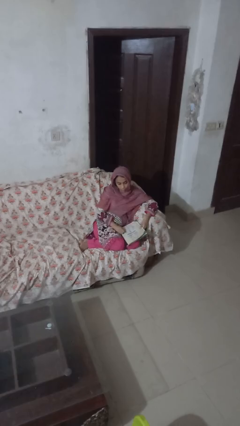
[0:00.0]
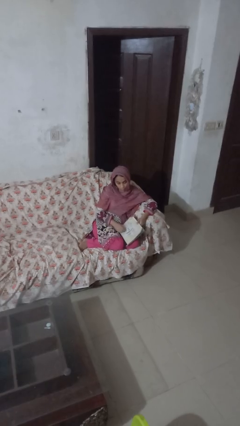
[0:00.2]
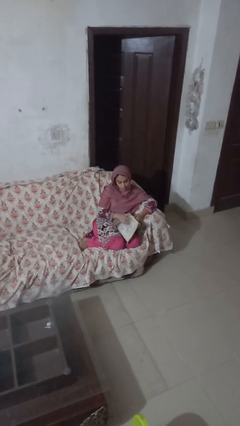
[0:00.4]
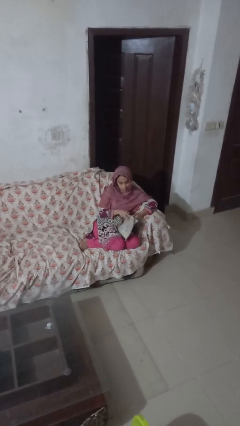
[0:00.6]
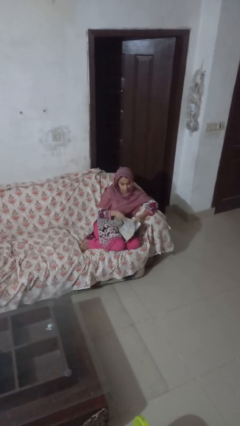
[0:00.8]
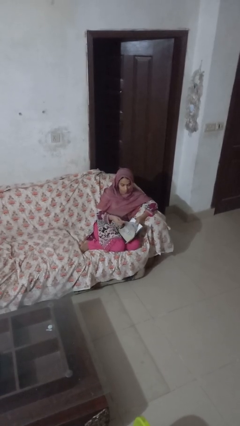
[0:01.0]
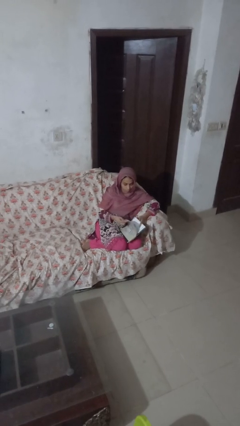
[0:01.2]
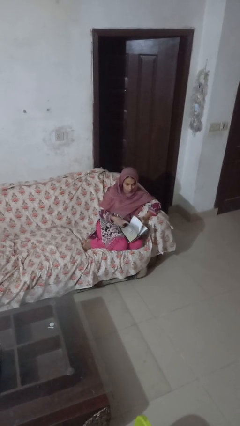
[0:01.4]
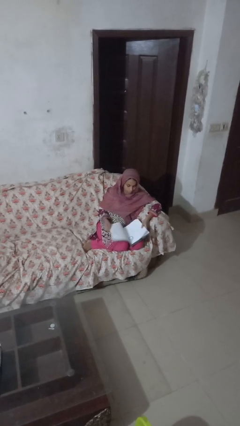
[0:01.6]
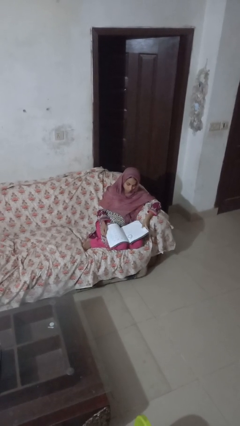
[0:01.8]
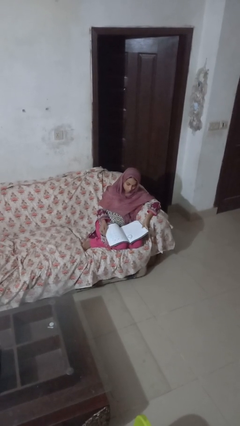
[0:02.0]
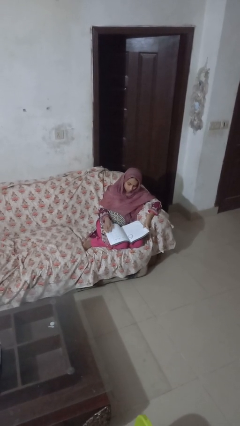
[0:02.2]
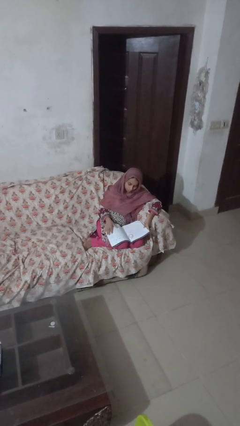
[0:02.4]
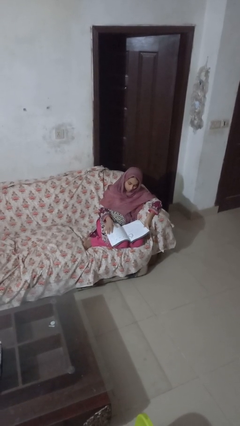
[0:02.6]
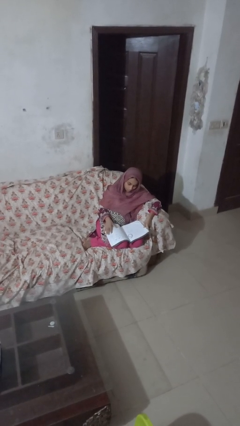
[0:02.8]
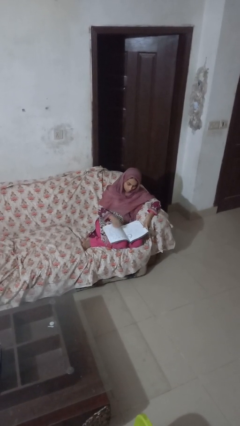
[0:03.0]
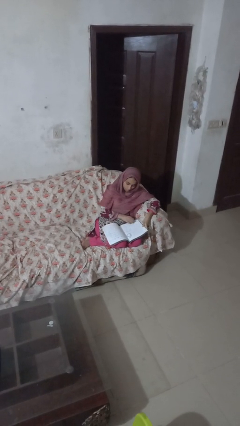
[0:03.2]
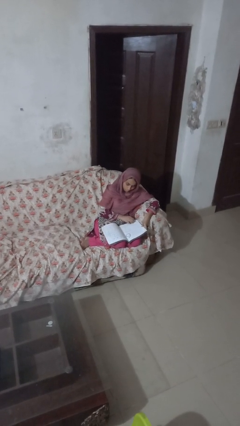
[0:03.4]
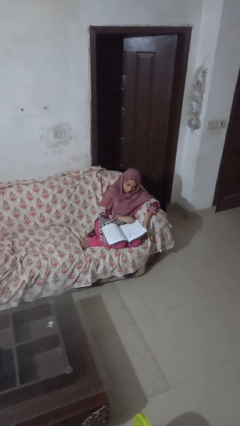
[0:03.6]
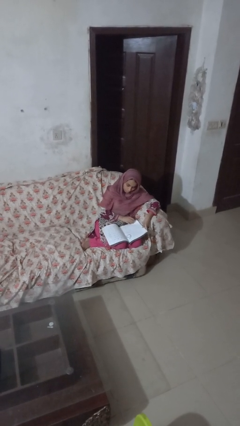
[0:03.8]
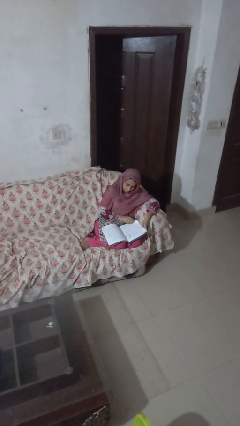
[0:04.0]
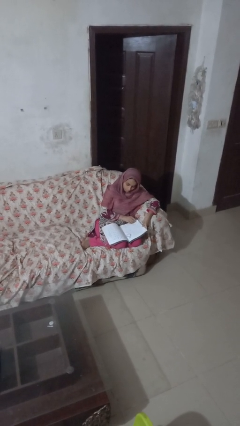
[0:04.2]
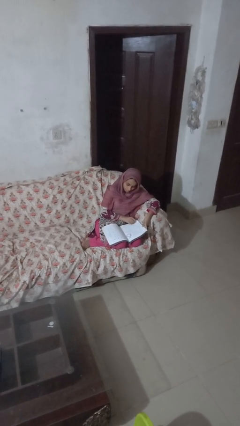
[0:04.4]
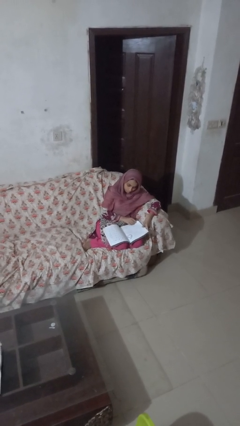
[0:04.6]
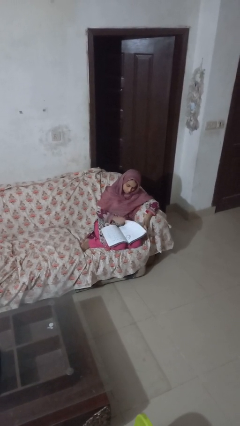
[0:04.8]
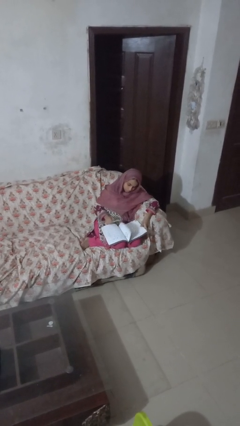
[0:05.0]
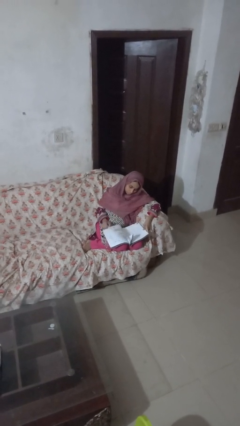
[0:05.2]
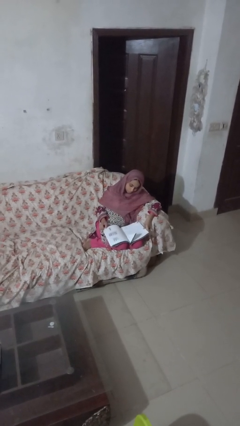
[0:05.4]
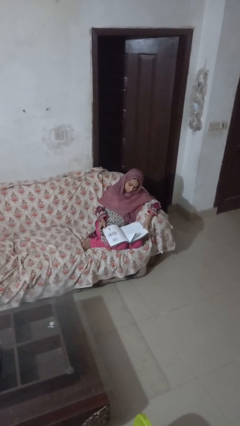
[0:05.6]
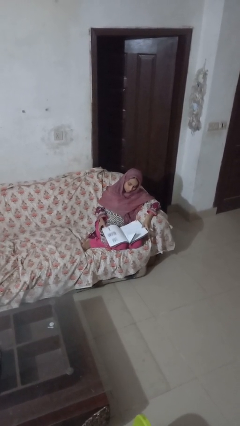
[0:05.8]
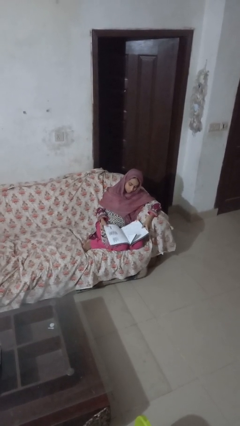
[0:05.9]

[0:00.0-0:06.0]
person reads book

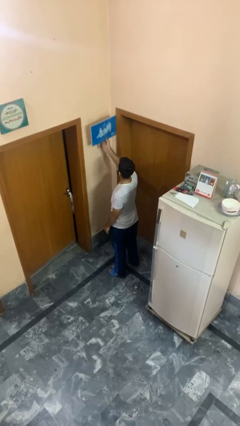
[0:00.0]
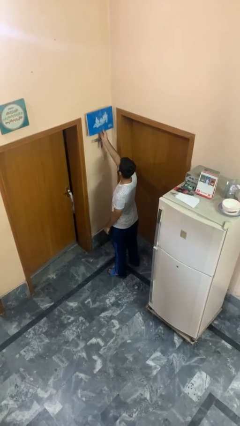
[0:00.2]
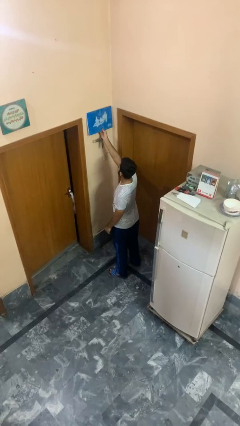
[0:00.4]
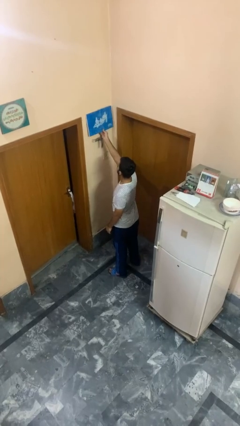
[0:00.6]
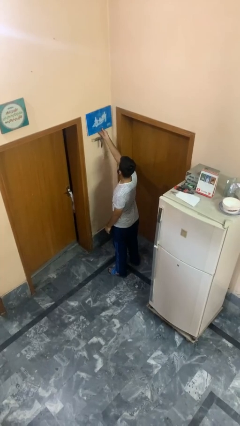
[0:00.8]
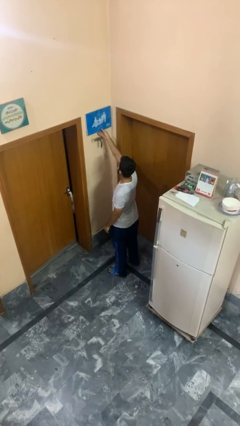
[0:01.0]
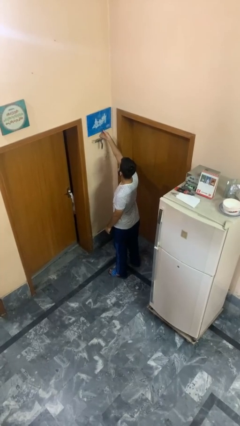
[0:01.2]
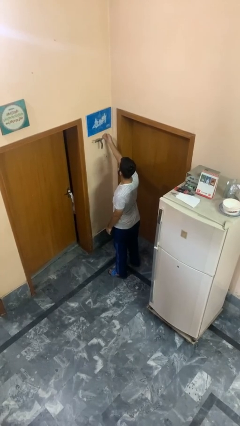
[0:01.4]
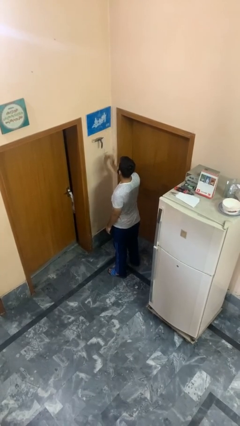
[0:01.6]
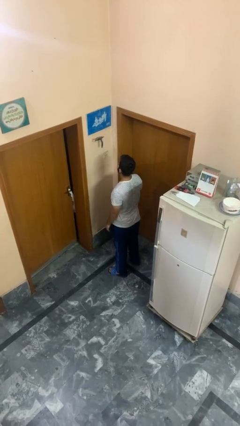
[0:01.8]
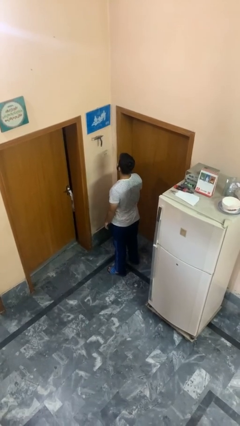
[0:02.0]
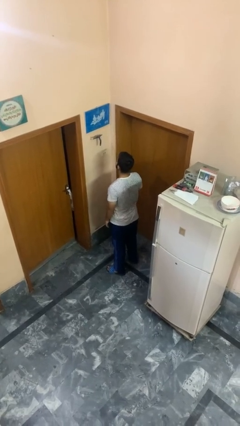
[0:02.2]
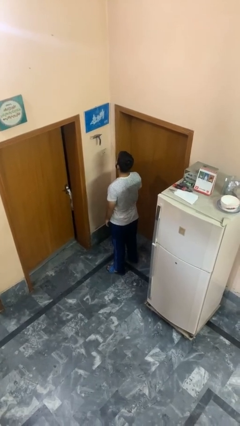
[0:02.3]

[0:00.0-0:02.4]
person puts up picture frame

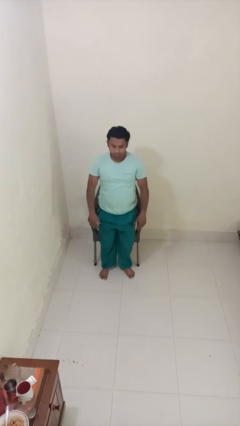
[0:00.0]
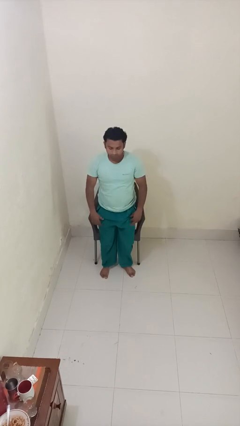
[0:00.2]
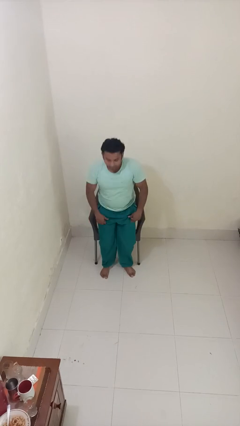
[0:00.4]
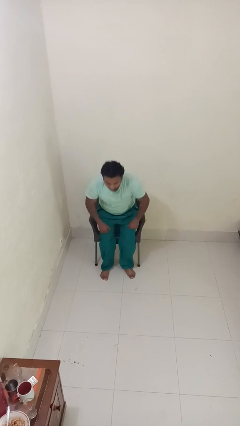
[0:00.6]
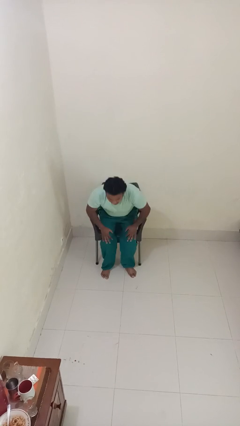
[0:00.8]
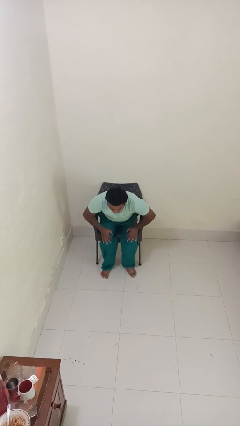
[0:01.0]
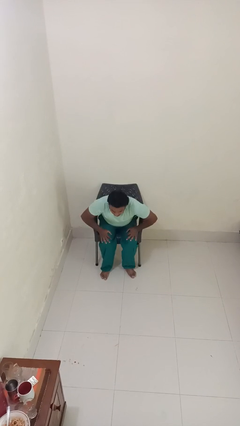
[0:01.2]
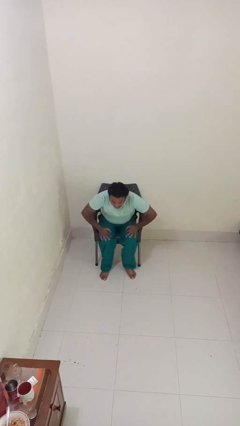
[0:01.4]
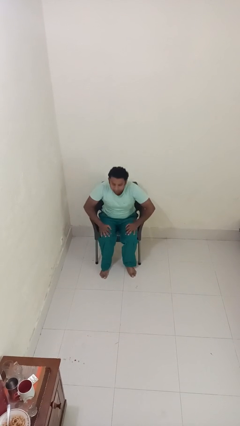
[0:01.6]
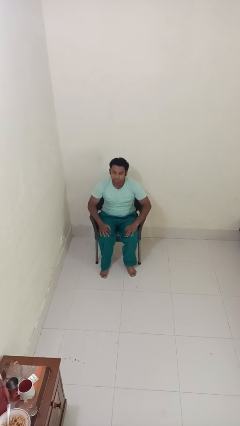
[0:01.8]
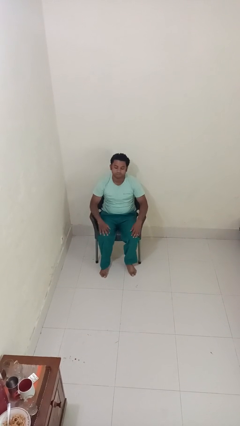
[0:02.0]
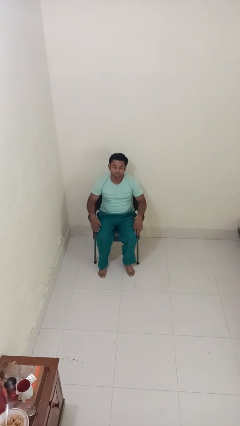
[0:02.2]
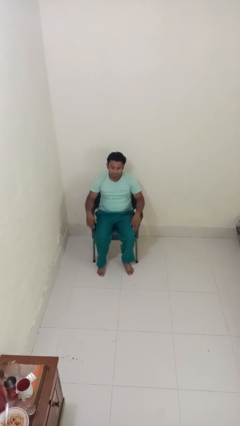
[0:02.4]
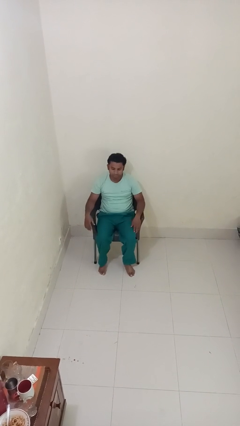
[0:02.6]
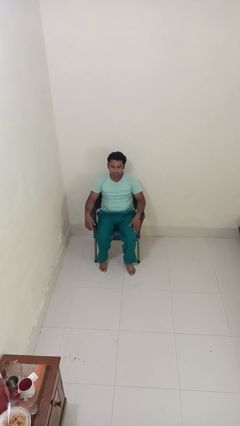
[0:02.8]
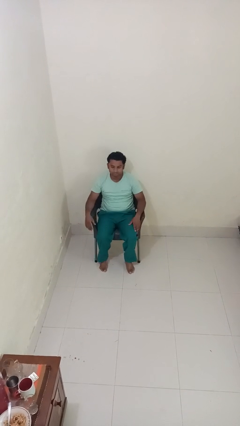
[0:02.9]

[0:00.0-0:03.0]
person sits down

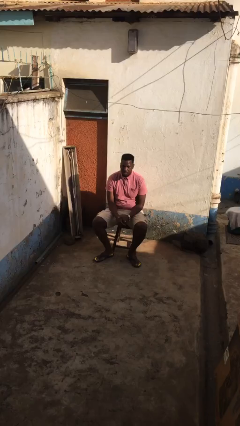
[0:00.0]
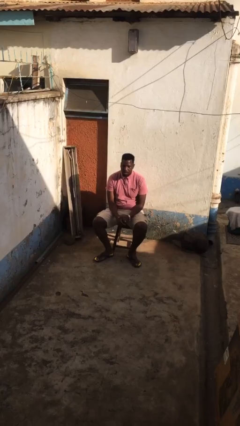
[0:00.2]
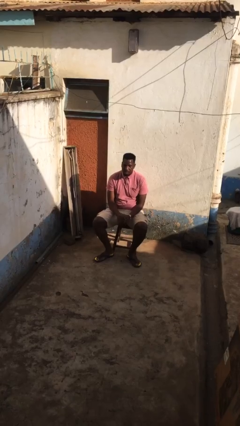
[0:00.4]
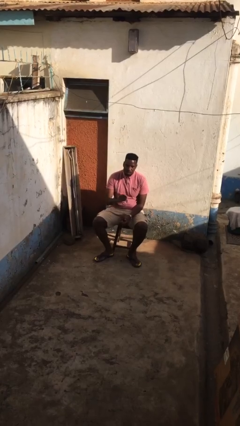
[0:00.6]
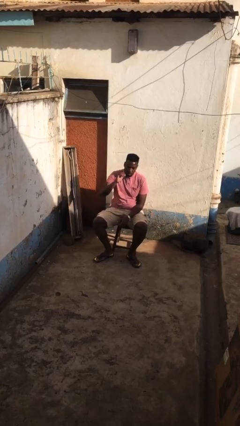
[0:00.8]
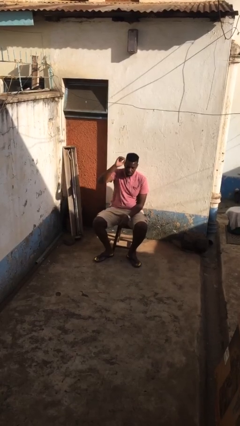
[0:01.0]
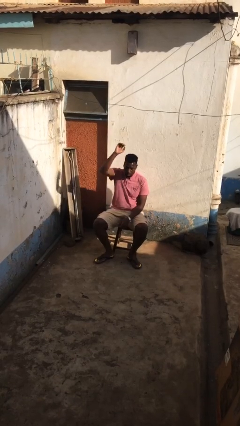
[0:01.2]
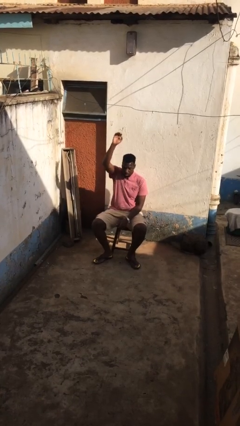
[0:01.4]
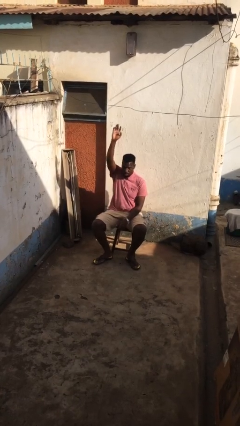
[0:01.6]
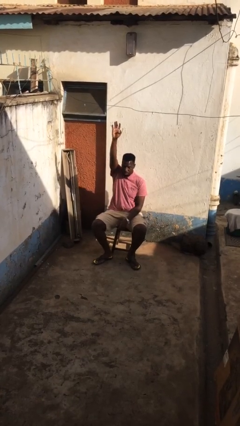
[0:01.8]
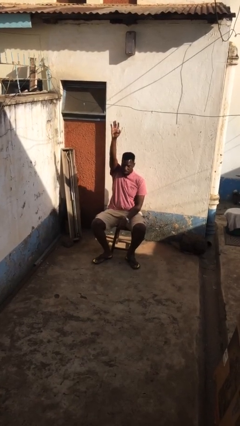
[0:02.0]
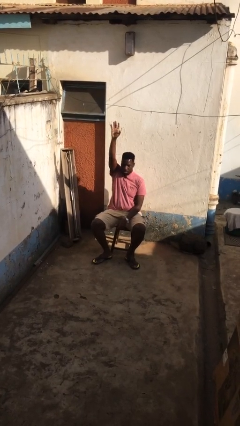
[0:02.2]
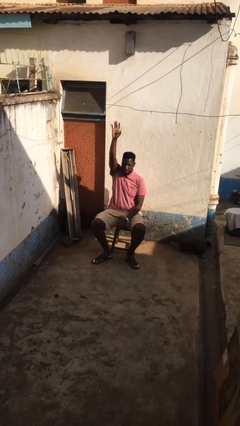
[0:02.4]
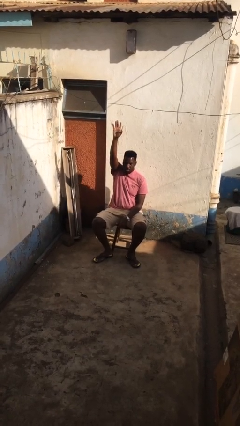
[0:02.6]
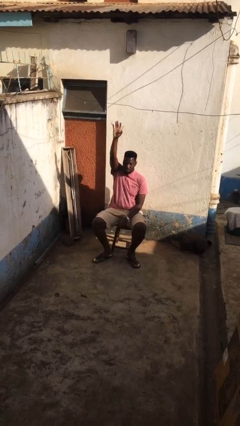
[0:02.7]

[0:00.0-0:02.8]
person gestures raise hand

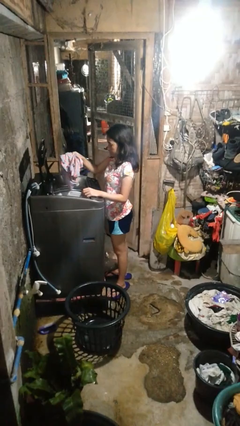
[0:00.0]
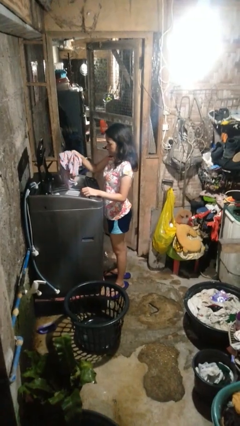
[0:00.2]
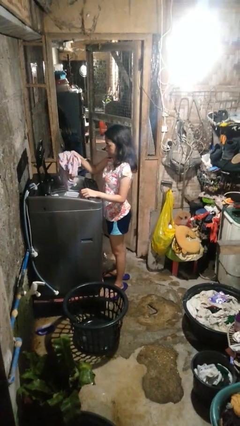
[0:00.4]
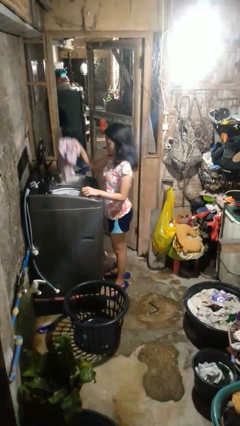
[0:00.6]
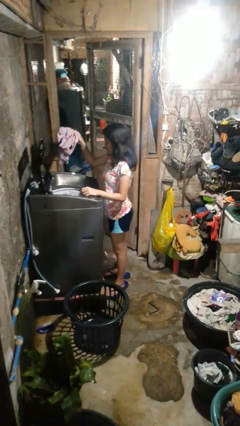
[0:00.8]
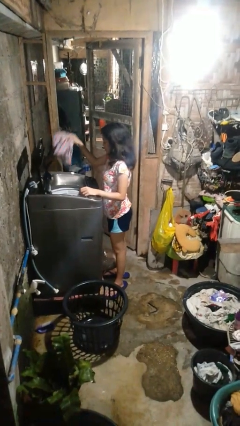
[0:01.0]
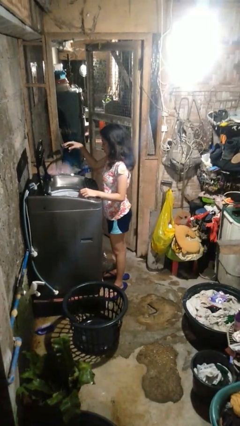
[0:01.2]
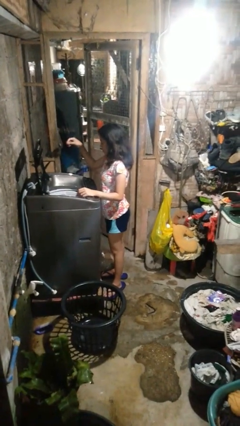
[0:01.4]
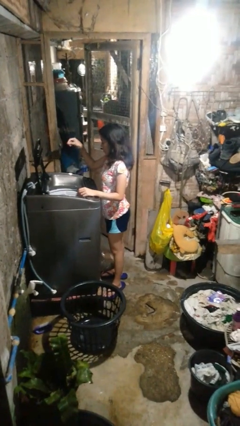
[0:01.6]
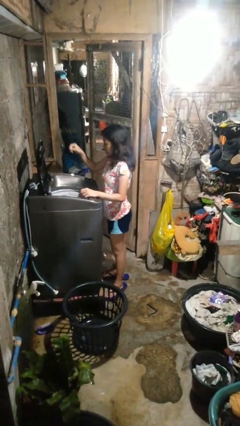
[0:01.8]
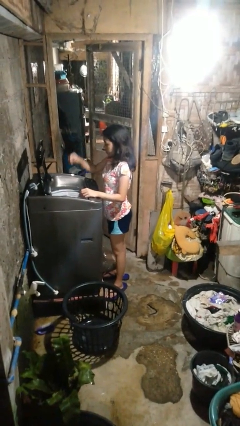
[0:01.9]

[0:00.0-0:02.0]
person loads dryer

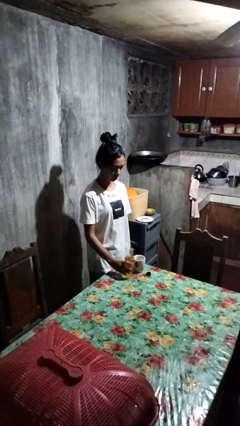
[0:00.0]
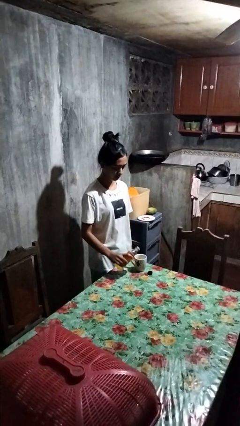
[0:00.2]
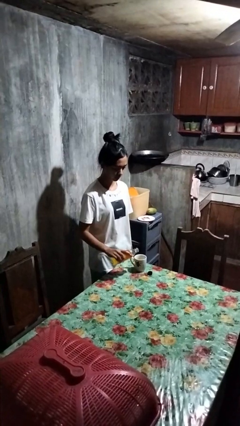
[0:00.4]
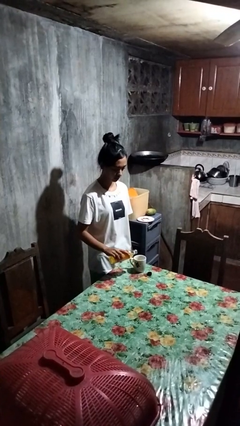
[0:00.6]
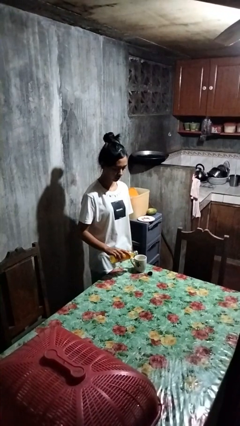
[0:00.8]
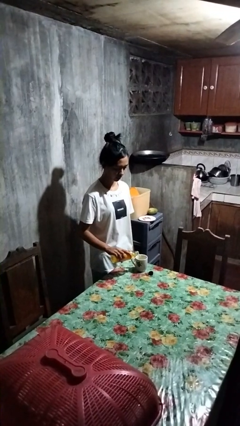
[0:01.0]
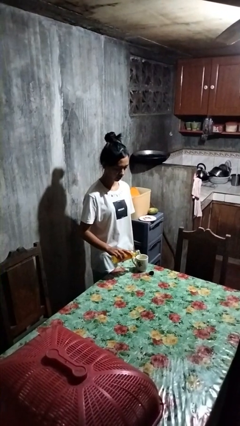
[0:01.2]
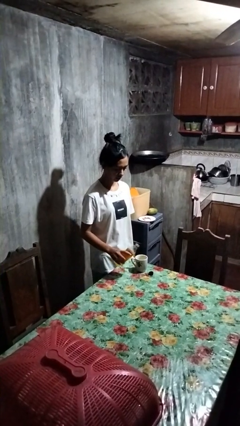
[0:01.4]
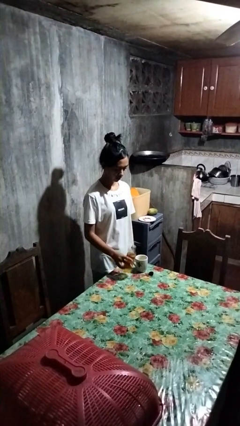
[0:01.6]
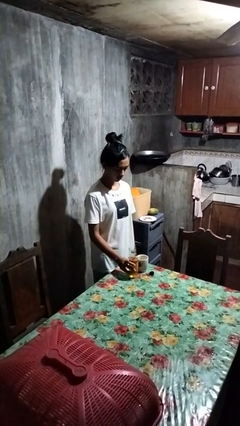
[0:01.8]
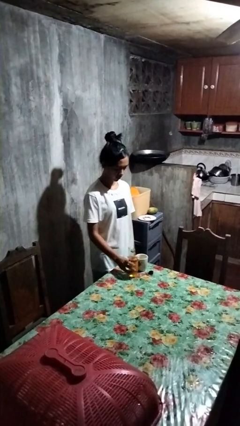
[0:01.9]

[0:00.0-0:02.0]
person pours liquid into cup
